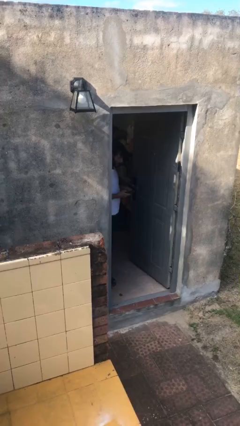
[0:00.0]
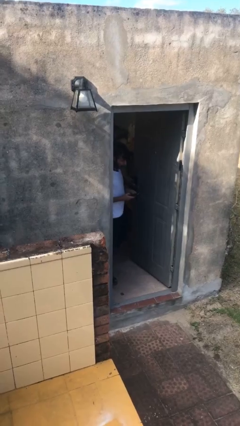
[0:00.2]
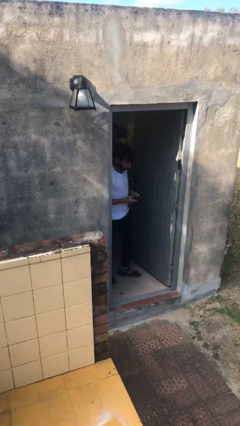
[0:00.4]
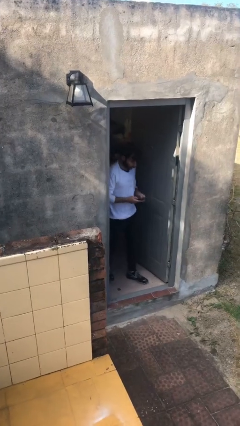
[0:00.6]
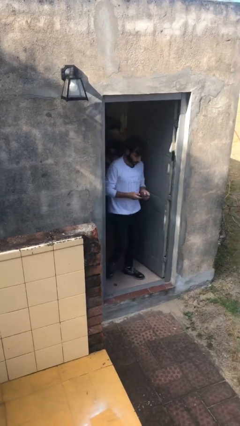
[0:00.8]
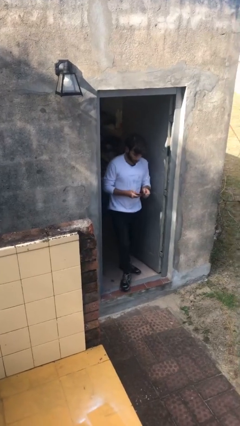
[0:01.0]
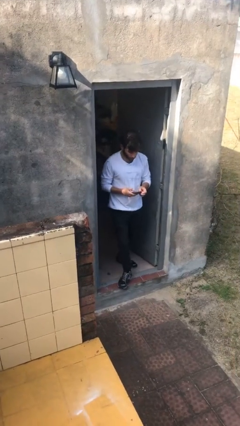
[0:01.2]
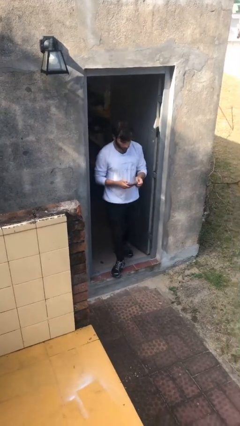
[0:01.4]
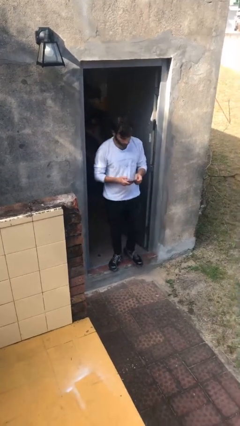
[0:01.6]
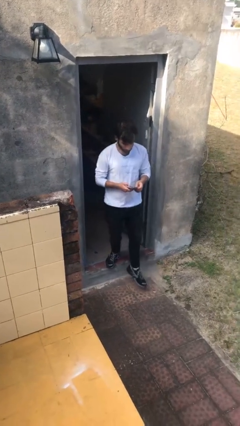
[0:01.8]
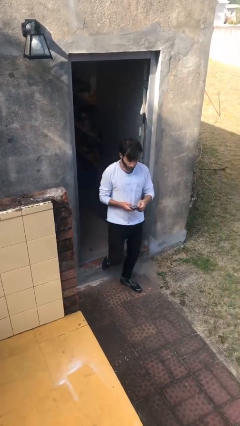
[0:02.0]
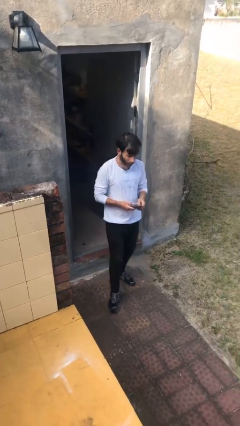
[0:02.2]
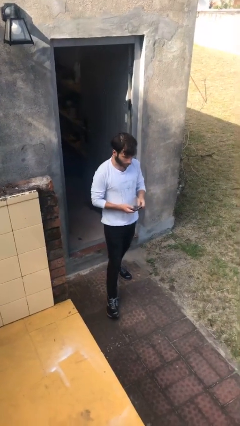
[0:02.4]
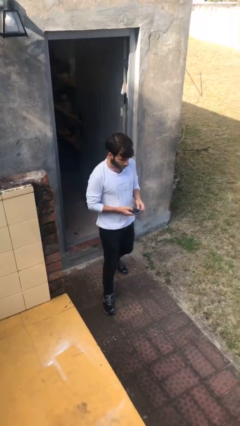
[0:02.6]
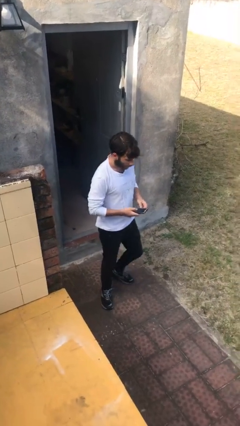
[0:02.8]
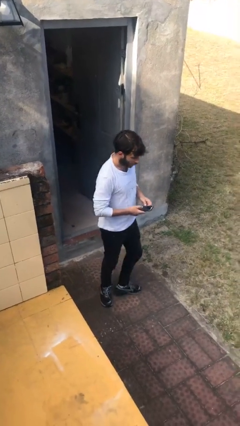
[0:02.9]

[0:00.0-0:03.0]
person enters scene through structure

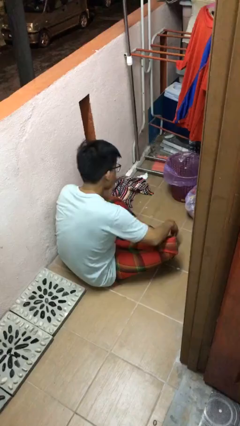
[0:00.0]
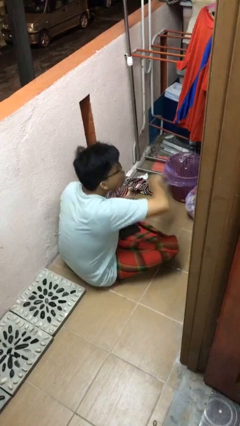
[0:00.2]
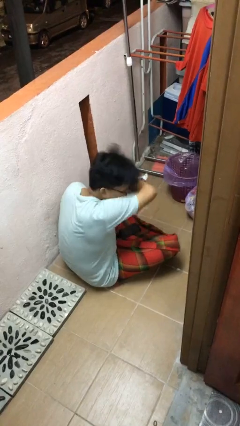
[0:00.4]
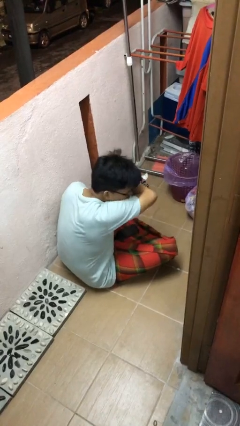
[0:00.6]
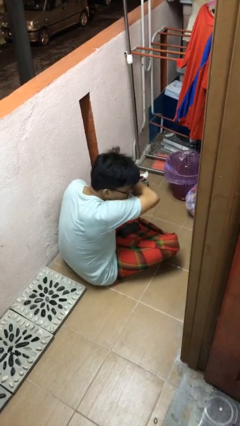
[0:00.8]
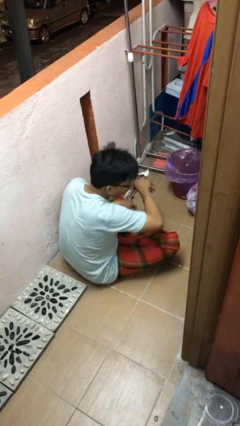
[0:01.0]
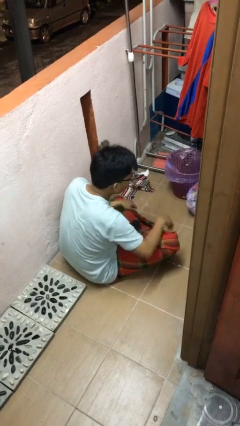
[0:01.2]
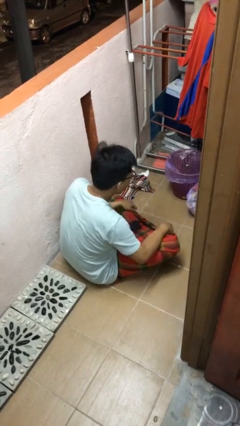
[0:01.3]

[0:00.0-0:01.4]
person sneezes into arm

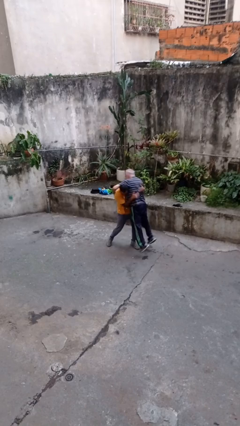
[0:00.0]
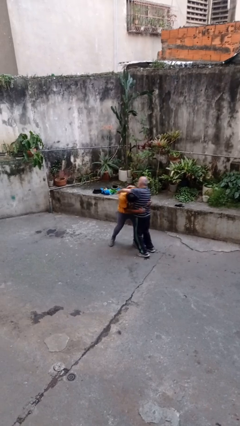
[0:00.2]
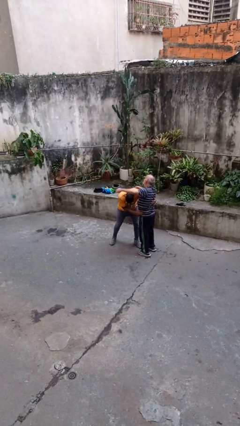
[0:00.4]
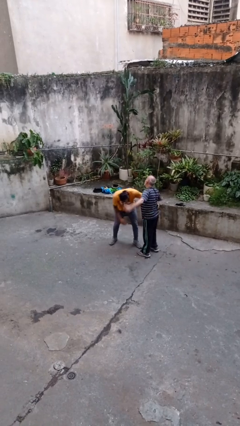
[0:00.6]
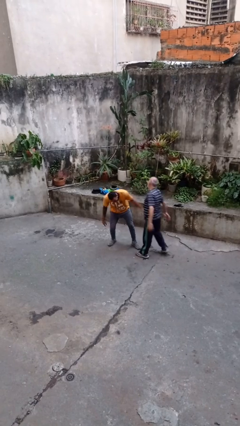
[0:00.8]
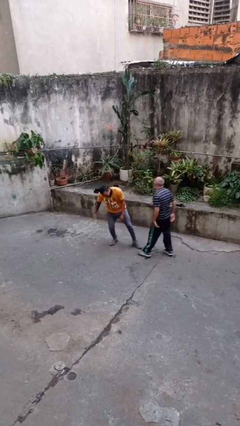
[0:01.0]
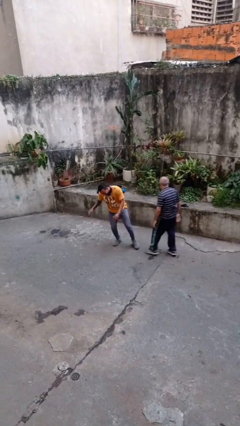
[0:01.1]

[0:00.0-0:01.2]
person puts down person

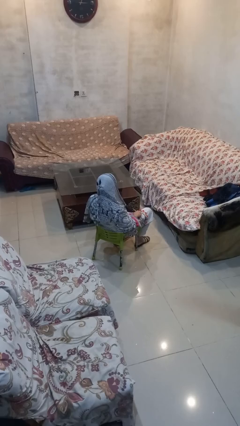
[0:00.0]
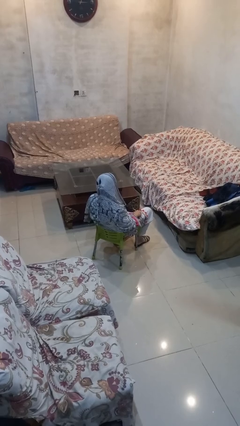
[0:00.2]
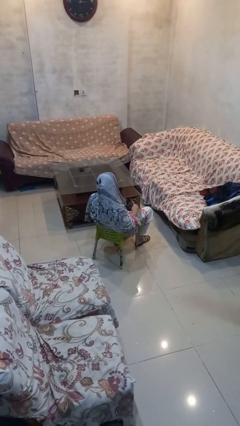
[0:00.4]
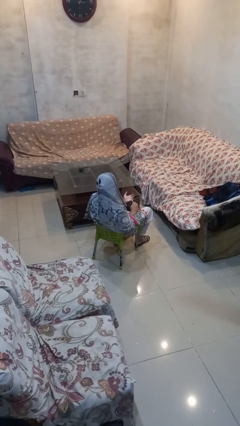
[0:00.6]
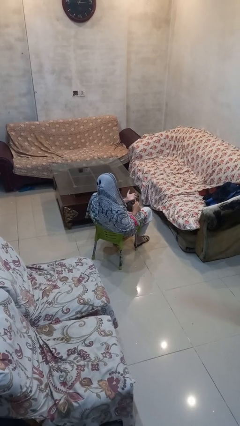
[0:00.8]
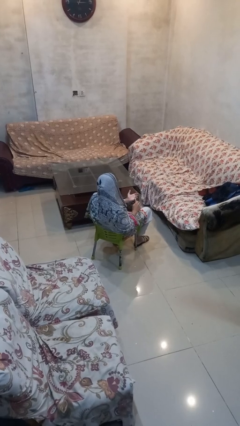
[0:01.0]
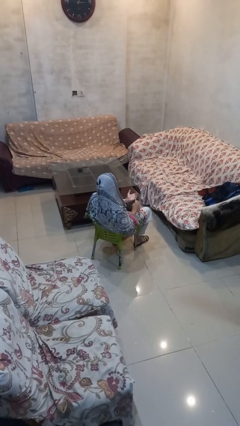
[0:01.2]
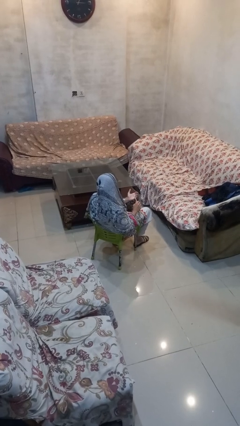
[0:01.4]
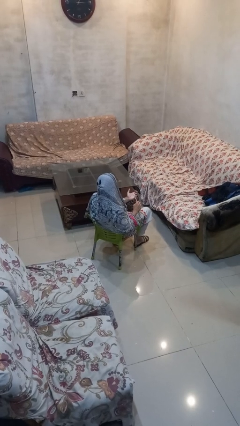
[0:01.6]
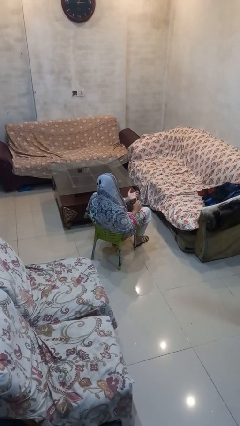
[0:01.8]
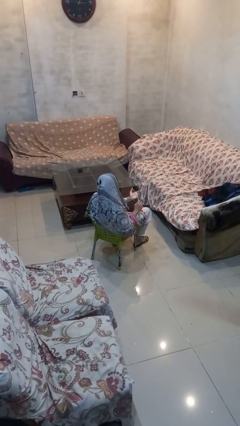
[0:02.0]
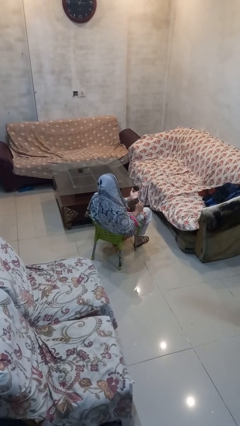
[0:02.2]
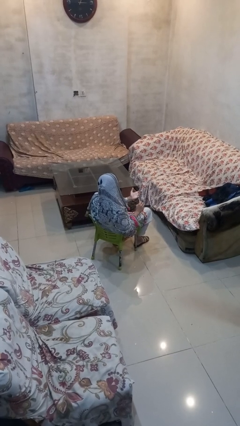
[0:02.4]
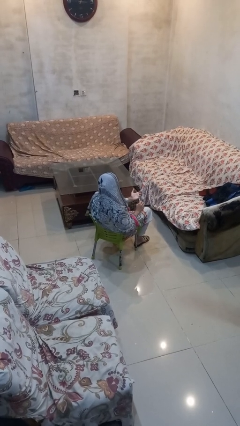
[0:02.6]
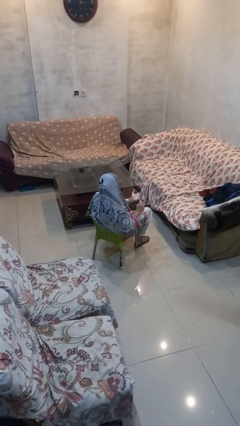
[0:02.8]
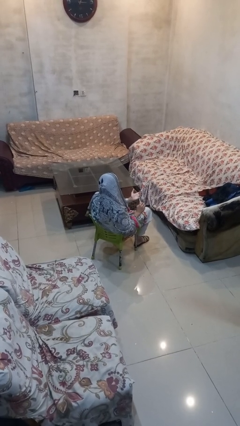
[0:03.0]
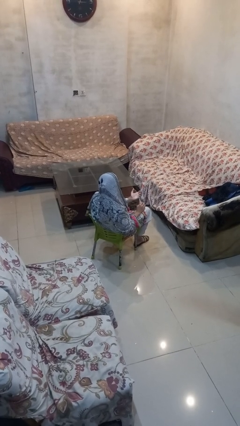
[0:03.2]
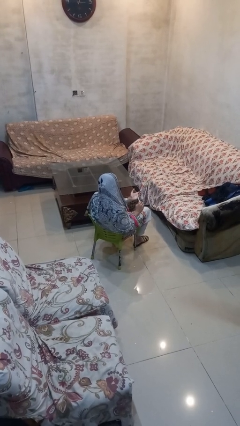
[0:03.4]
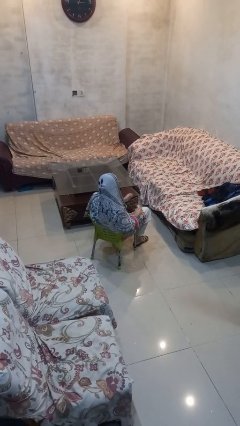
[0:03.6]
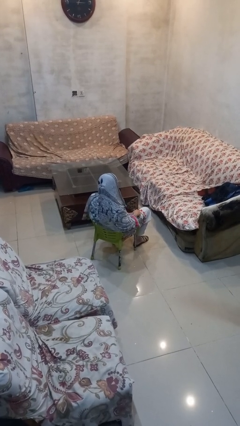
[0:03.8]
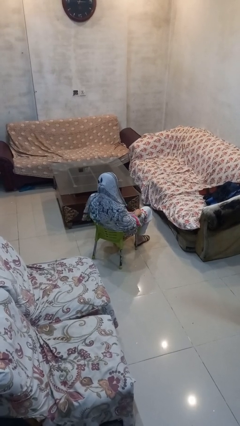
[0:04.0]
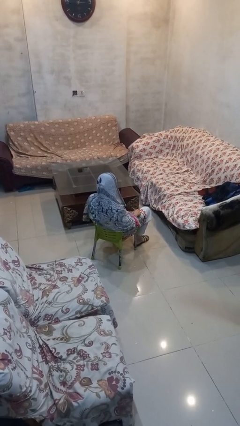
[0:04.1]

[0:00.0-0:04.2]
person files fingernails

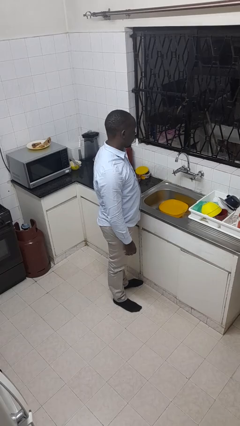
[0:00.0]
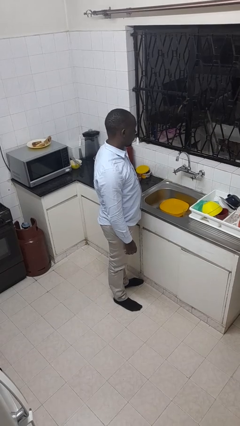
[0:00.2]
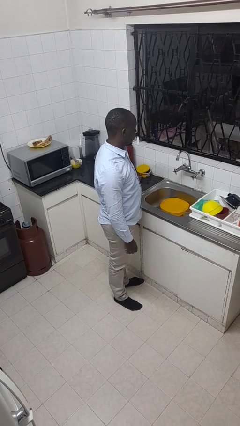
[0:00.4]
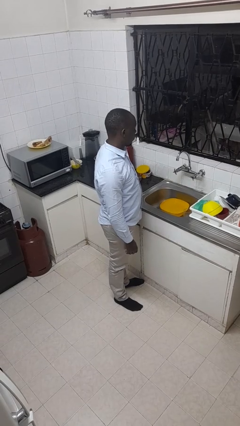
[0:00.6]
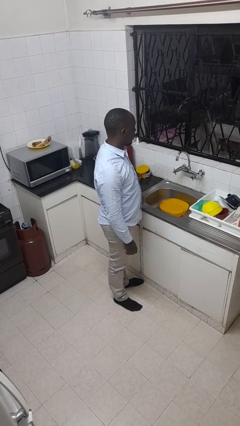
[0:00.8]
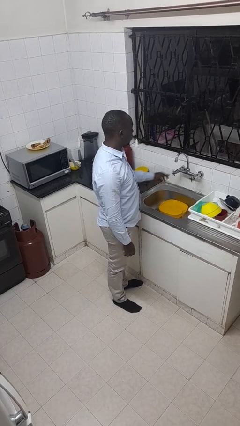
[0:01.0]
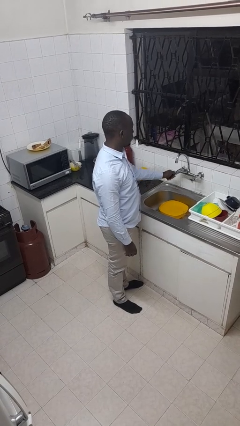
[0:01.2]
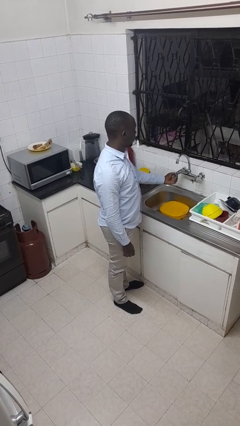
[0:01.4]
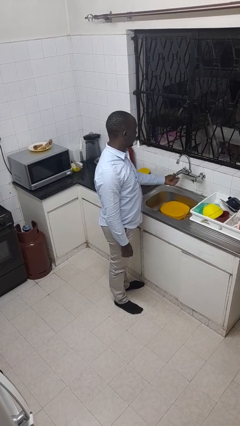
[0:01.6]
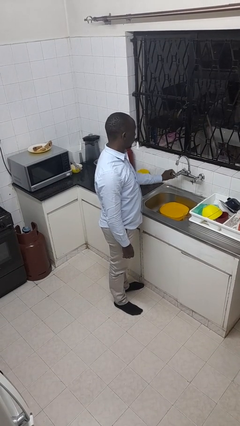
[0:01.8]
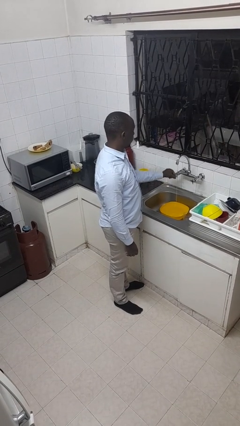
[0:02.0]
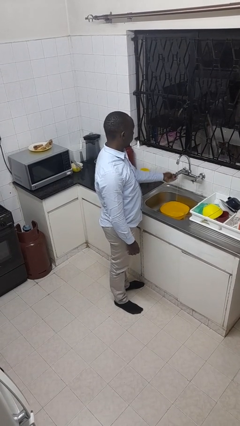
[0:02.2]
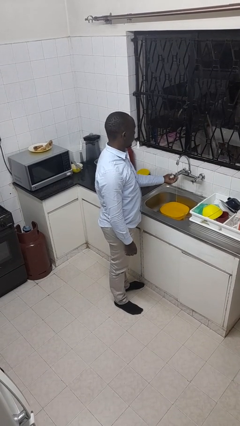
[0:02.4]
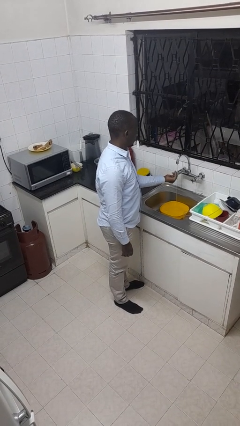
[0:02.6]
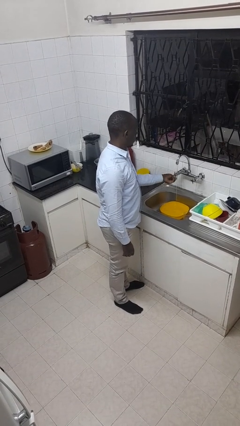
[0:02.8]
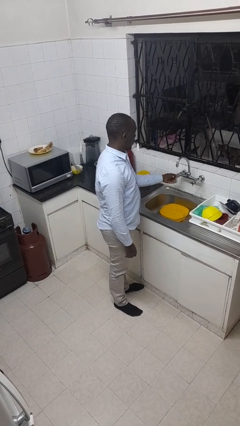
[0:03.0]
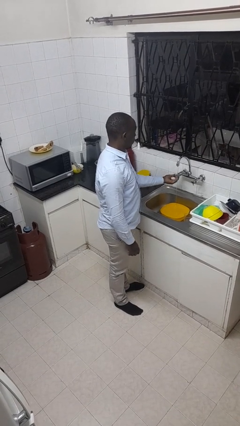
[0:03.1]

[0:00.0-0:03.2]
person turns on faucet

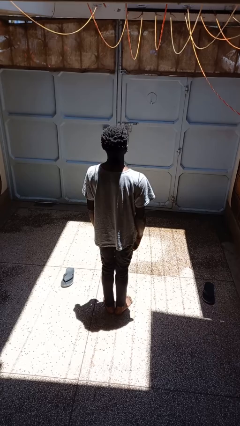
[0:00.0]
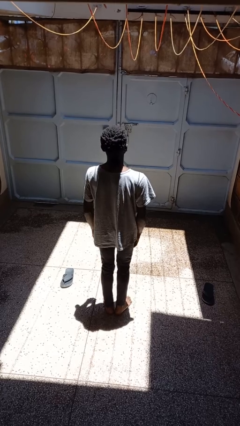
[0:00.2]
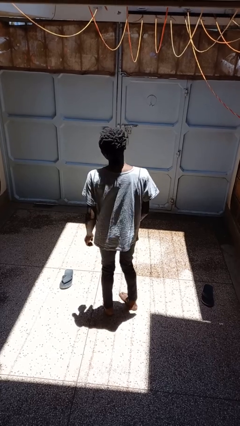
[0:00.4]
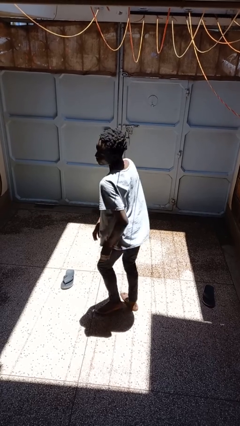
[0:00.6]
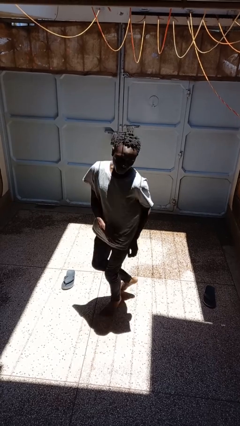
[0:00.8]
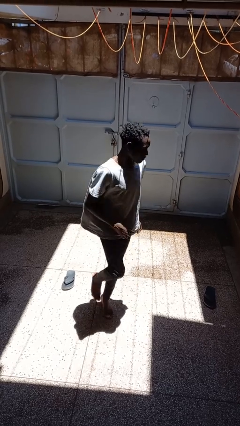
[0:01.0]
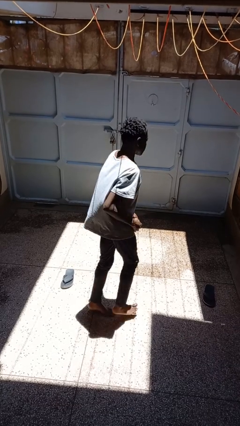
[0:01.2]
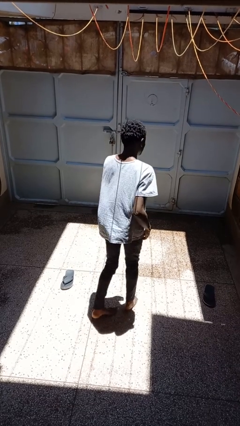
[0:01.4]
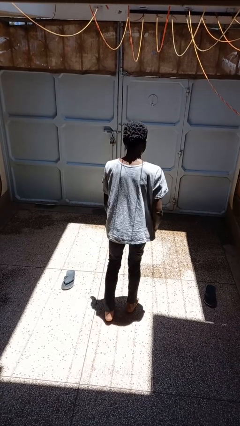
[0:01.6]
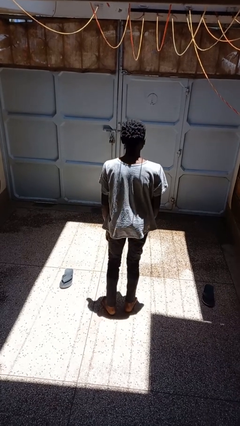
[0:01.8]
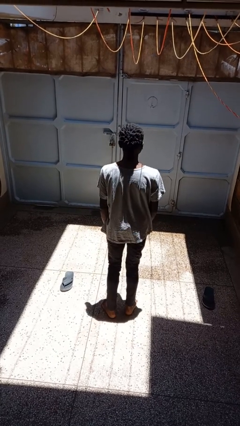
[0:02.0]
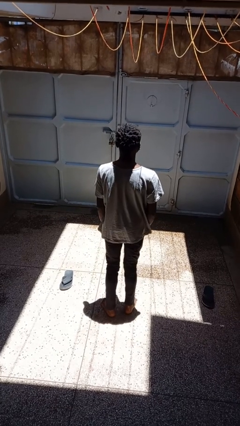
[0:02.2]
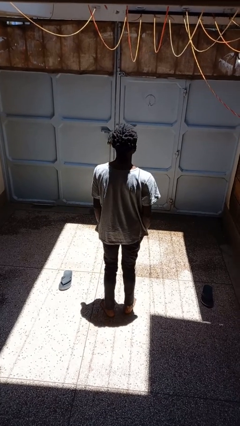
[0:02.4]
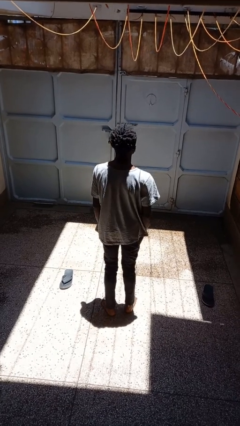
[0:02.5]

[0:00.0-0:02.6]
person twirls

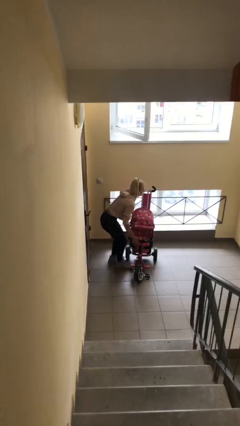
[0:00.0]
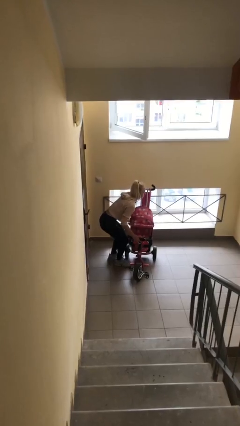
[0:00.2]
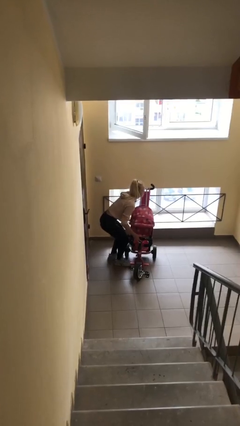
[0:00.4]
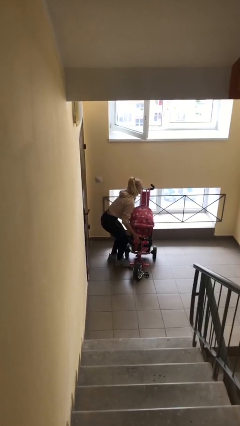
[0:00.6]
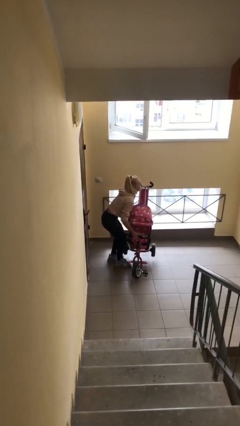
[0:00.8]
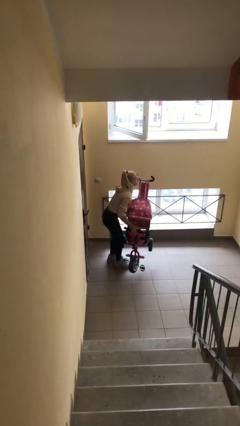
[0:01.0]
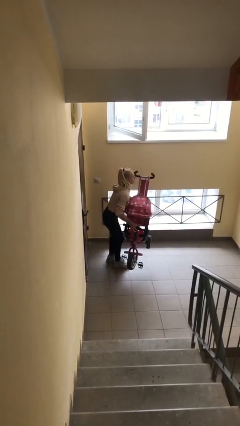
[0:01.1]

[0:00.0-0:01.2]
person picks up object from floor
